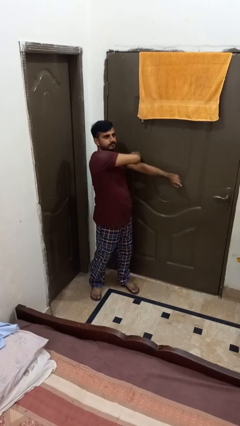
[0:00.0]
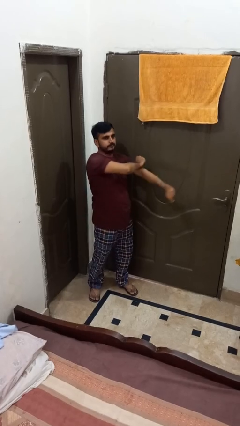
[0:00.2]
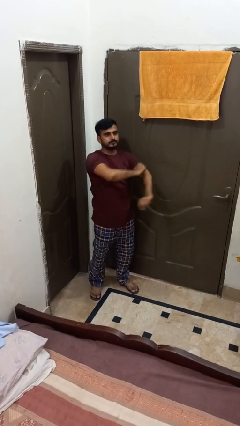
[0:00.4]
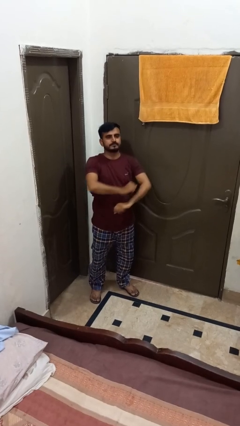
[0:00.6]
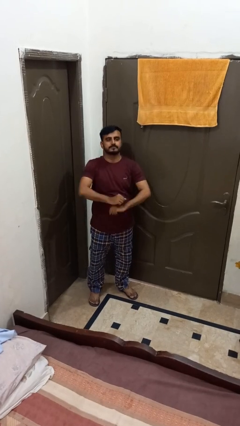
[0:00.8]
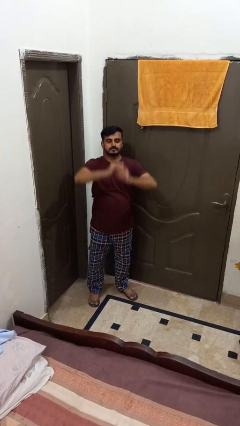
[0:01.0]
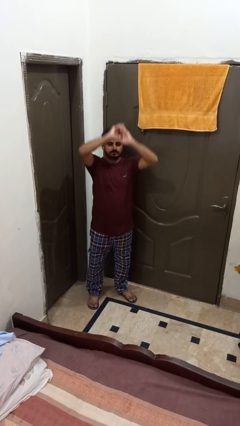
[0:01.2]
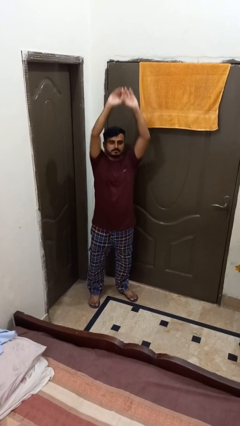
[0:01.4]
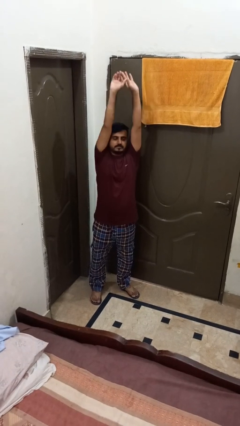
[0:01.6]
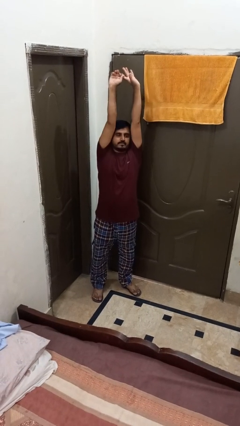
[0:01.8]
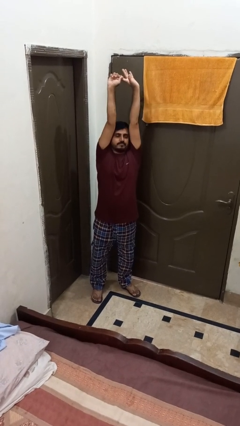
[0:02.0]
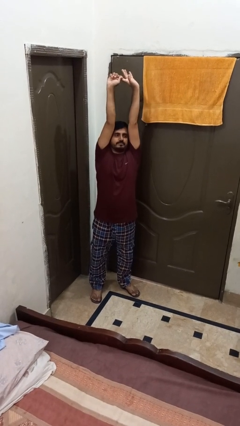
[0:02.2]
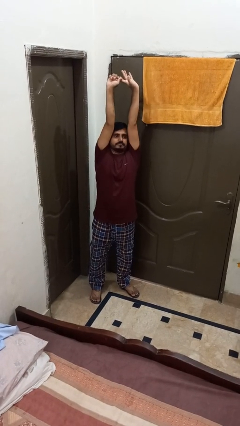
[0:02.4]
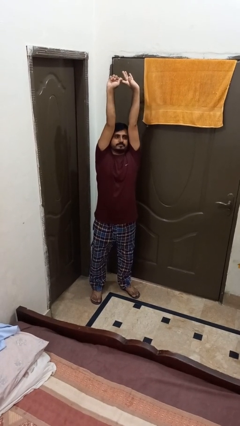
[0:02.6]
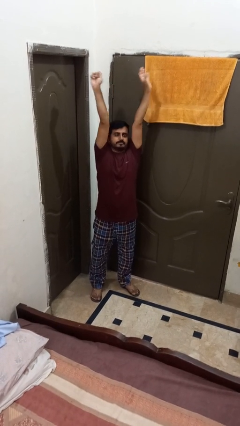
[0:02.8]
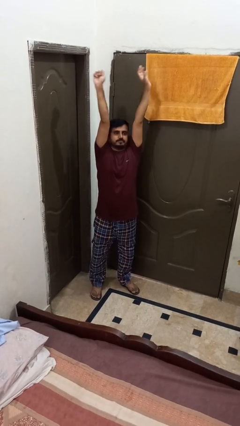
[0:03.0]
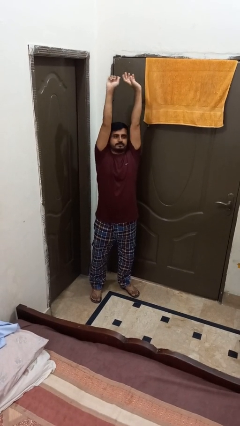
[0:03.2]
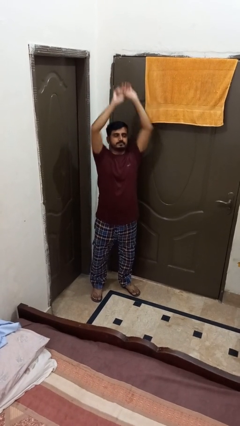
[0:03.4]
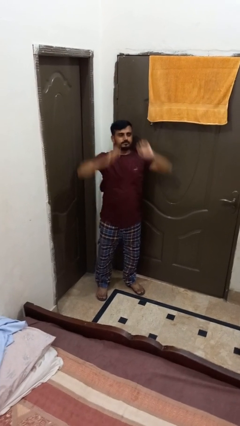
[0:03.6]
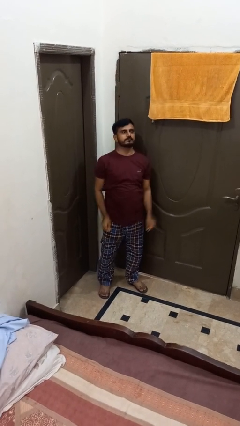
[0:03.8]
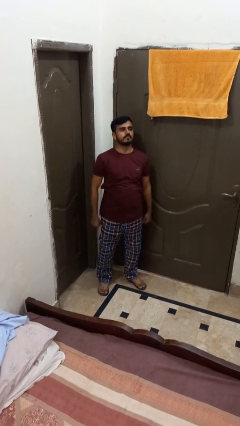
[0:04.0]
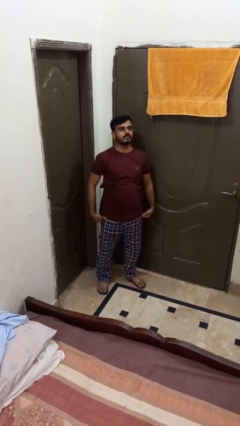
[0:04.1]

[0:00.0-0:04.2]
person stretches arms over head

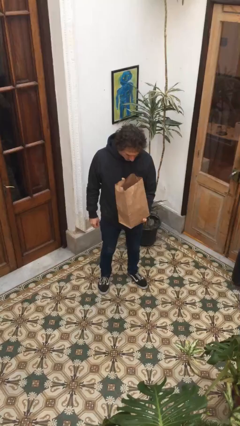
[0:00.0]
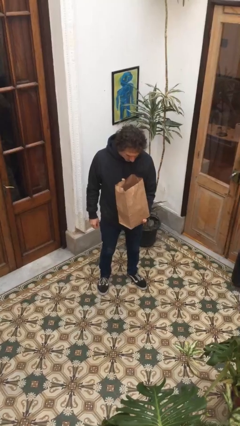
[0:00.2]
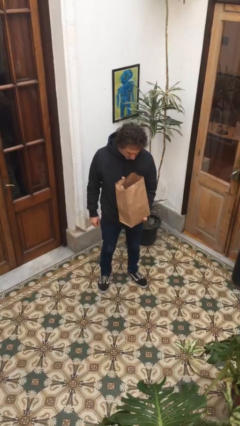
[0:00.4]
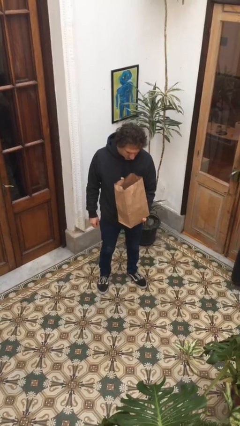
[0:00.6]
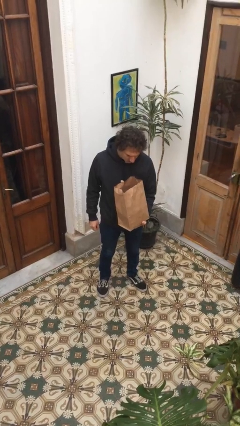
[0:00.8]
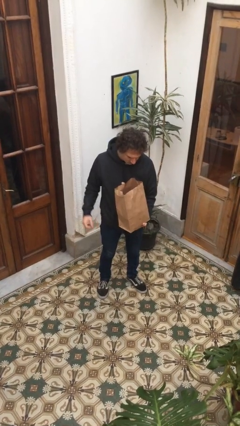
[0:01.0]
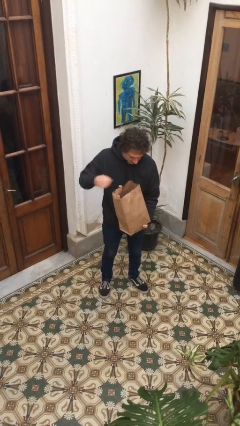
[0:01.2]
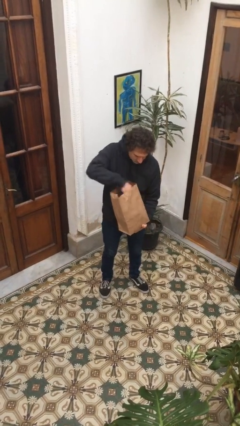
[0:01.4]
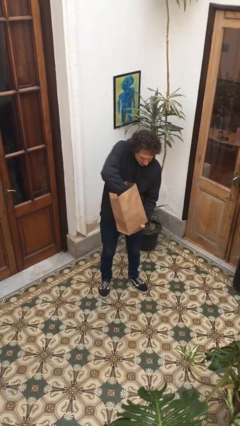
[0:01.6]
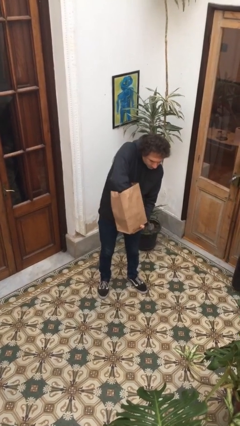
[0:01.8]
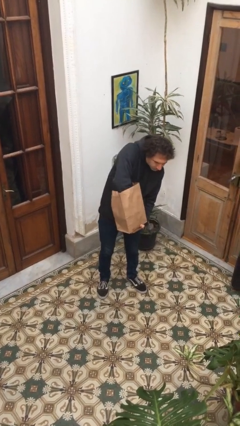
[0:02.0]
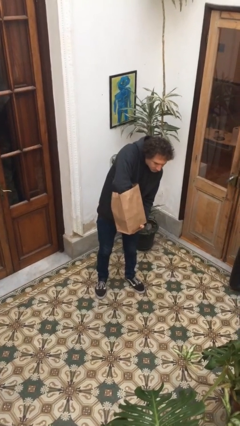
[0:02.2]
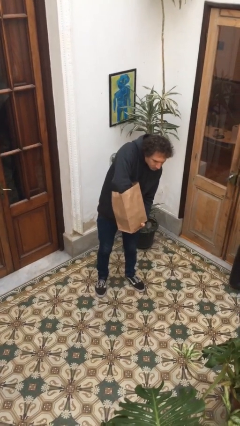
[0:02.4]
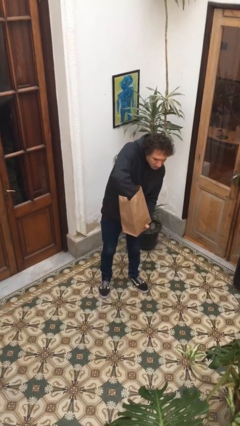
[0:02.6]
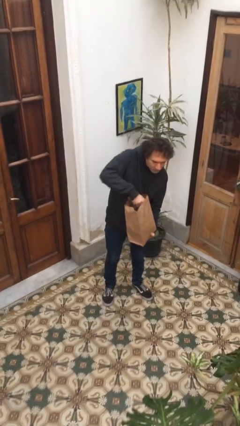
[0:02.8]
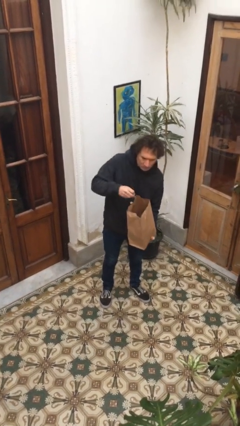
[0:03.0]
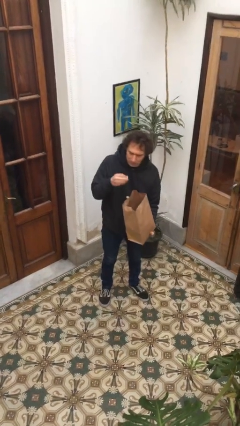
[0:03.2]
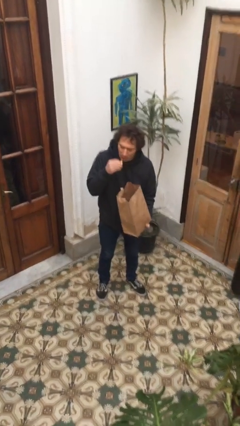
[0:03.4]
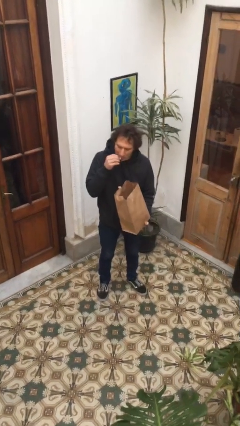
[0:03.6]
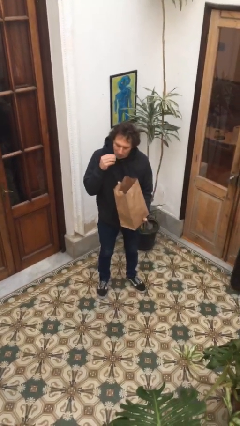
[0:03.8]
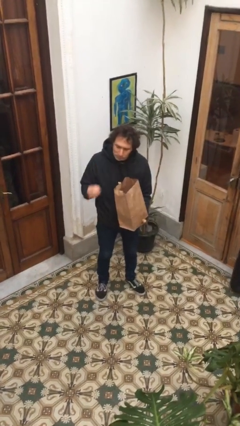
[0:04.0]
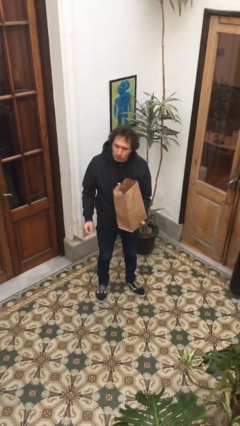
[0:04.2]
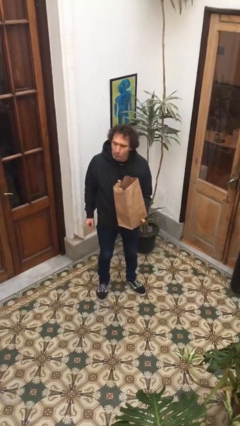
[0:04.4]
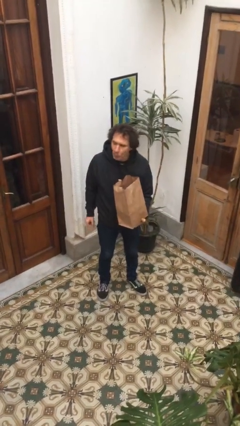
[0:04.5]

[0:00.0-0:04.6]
person eats snack from bag

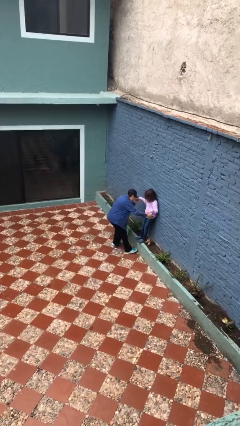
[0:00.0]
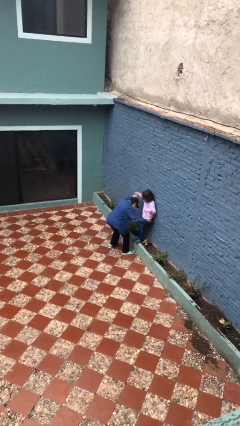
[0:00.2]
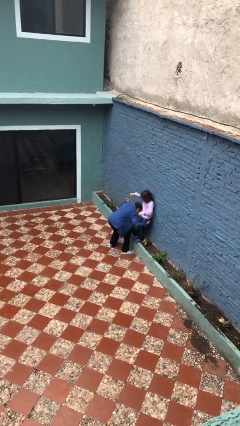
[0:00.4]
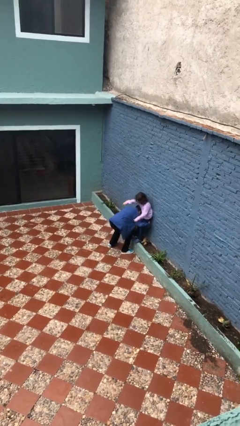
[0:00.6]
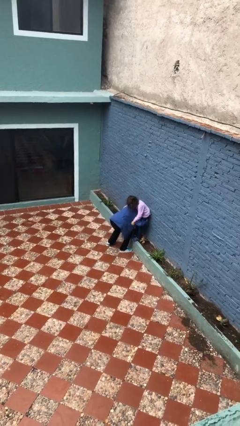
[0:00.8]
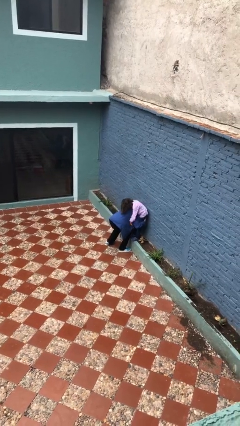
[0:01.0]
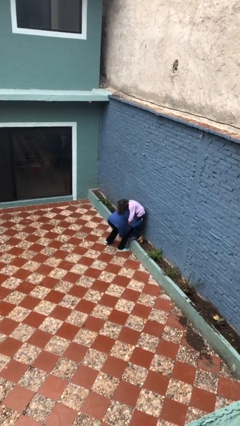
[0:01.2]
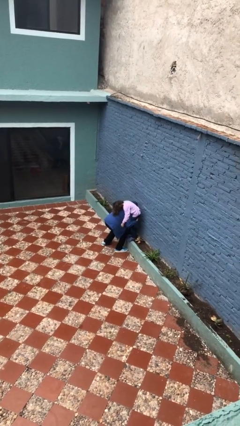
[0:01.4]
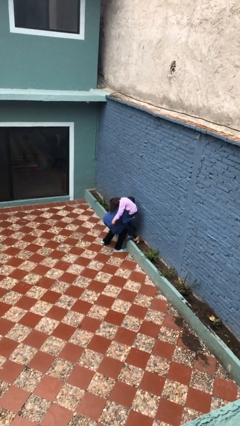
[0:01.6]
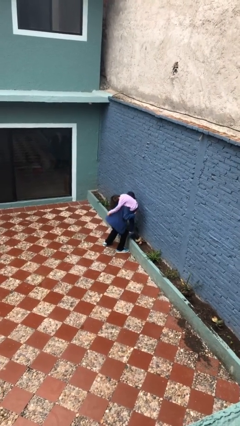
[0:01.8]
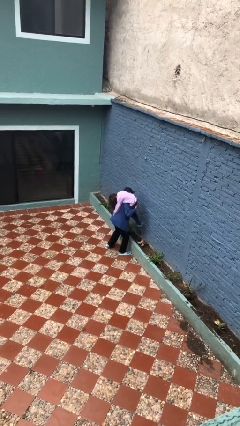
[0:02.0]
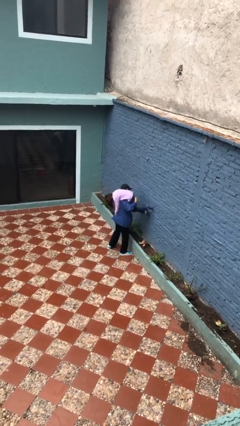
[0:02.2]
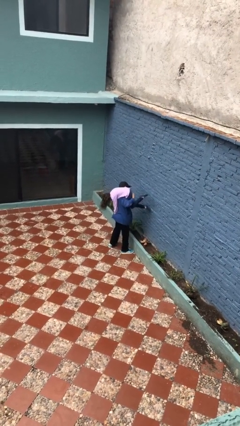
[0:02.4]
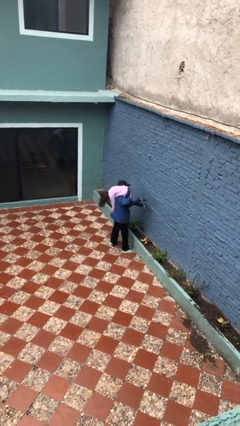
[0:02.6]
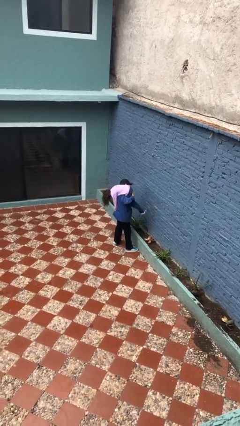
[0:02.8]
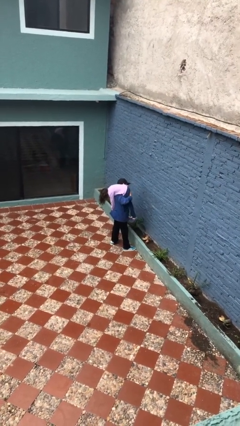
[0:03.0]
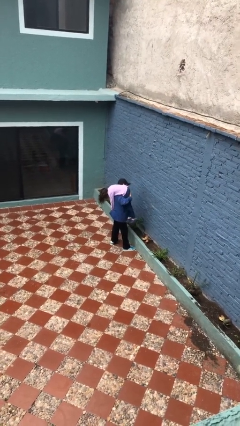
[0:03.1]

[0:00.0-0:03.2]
person carries person over shoulder

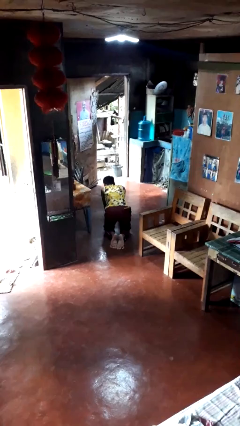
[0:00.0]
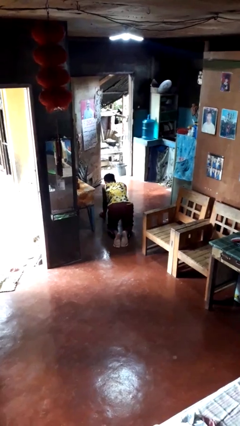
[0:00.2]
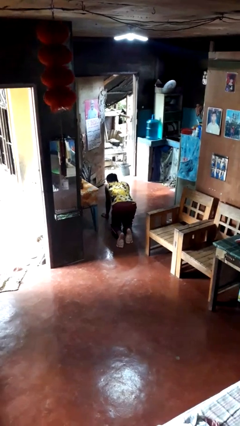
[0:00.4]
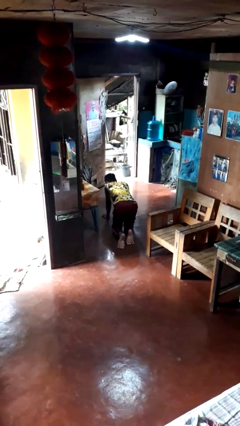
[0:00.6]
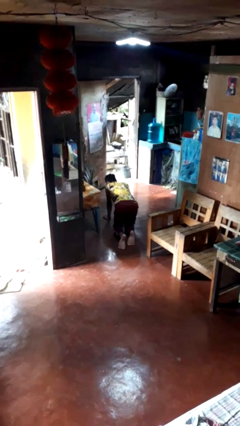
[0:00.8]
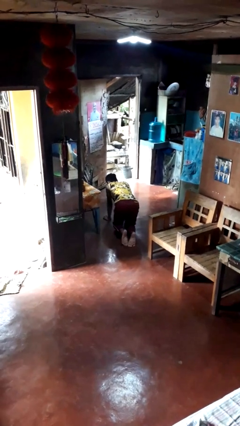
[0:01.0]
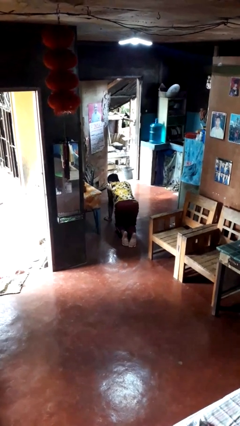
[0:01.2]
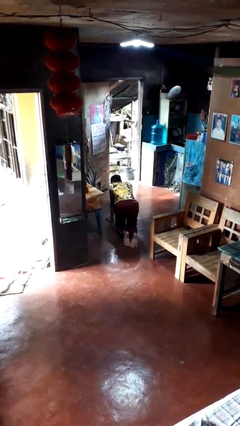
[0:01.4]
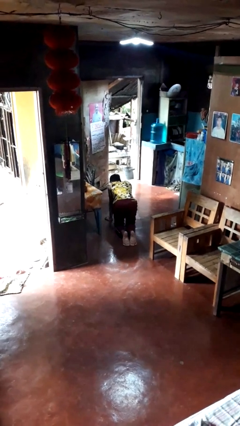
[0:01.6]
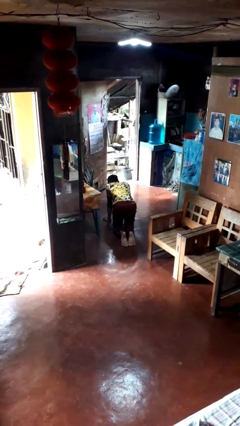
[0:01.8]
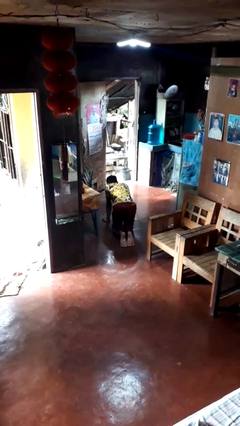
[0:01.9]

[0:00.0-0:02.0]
person crawls

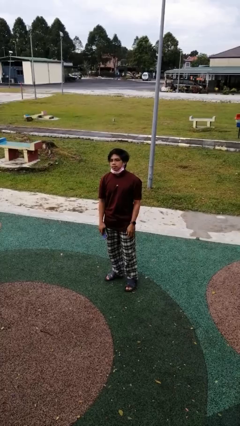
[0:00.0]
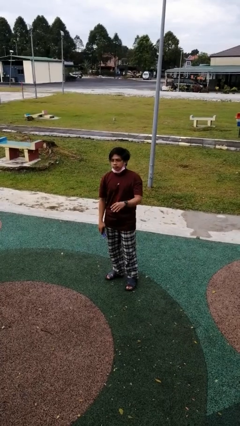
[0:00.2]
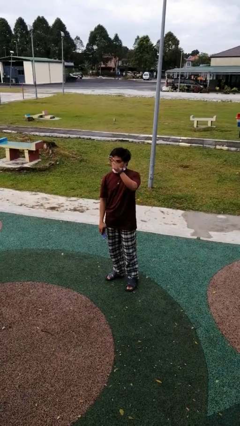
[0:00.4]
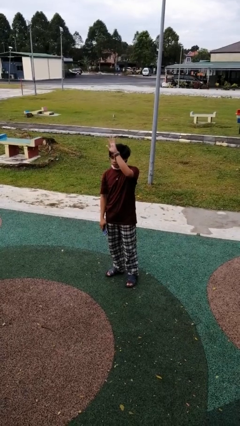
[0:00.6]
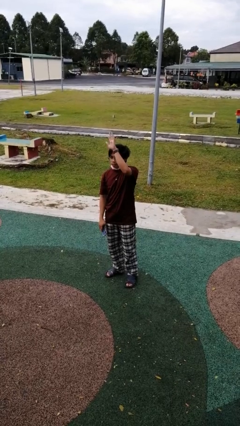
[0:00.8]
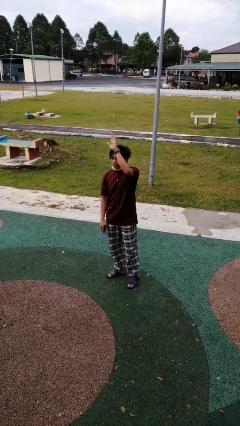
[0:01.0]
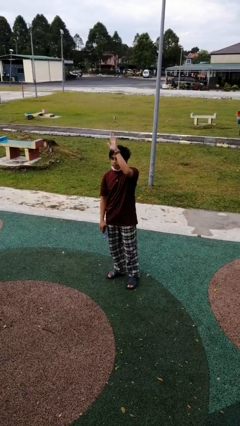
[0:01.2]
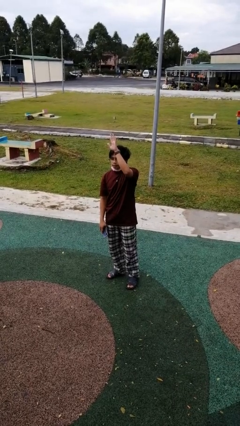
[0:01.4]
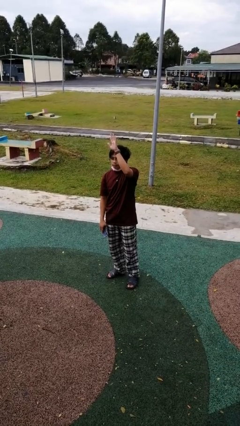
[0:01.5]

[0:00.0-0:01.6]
person gestures raise hand

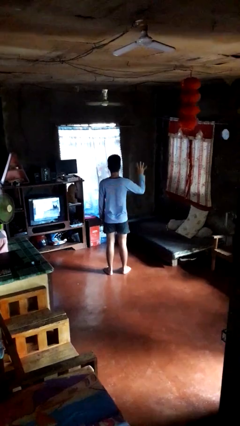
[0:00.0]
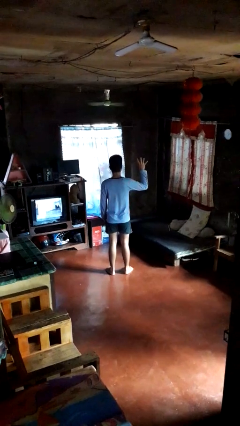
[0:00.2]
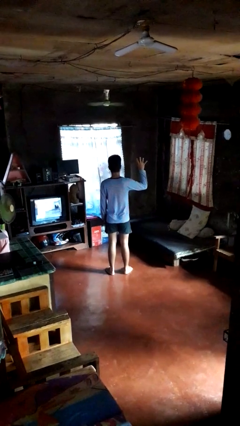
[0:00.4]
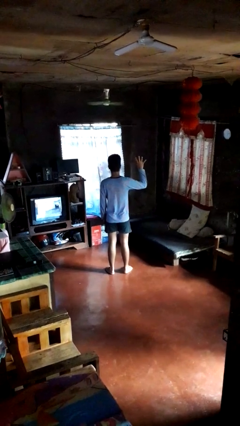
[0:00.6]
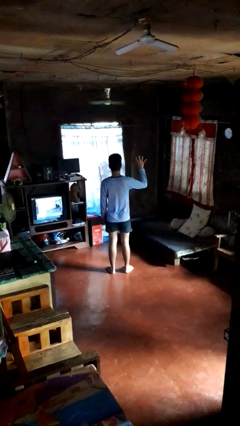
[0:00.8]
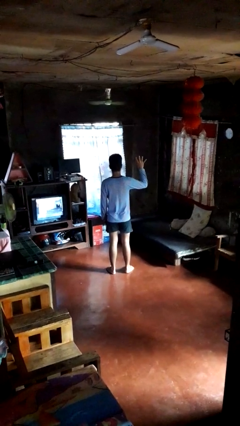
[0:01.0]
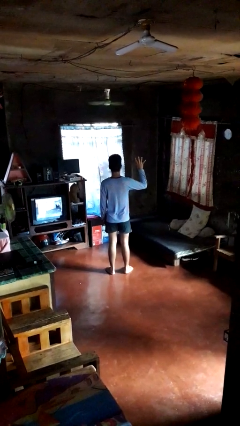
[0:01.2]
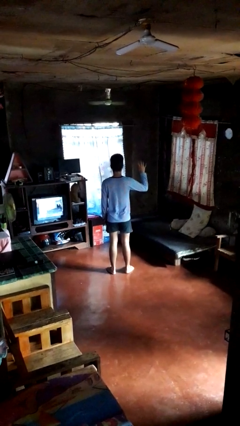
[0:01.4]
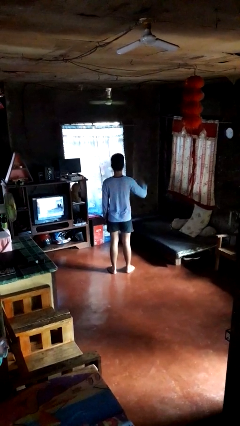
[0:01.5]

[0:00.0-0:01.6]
person gestures number four
